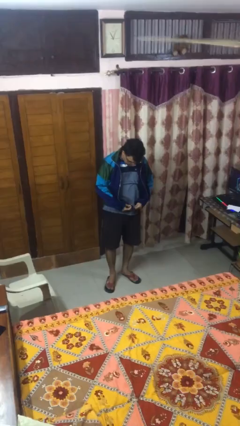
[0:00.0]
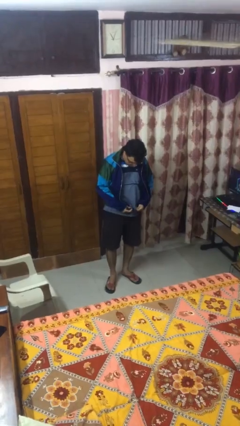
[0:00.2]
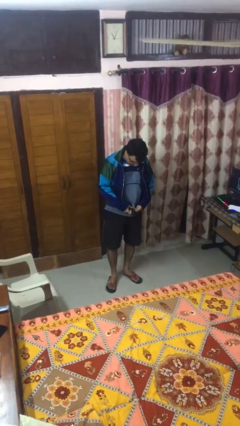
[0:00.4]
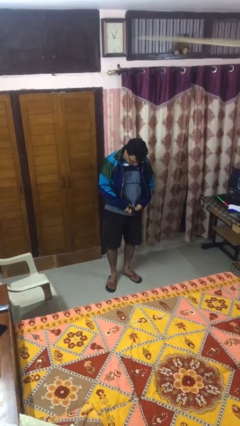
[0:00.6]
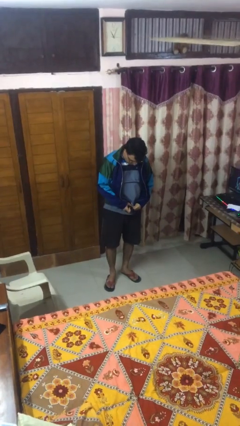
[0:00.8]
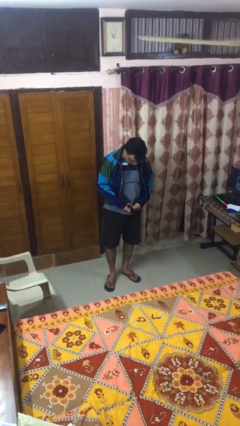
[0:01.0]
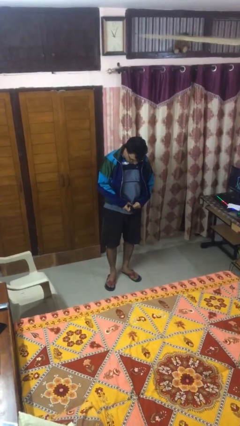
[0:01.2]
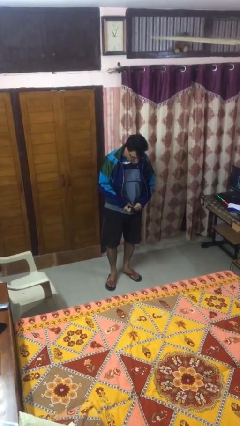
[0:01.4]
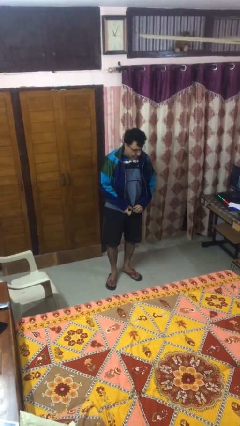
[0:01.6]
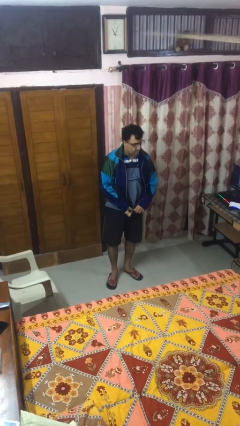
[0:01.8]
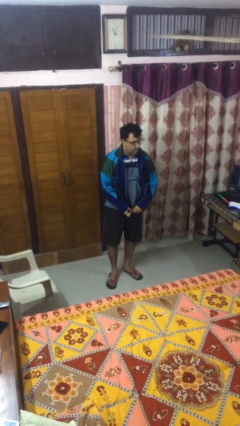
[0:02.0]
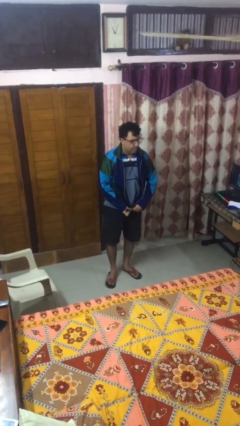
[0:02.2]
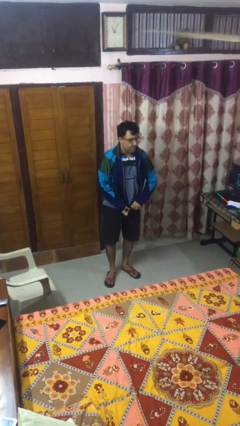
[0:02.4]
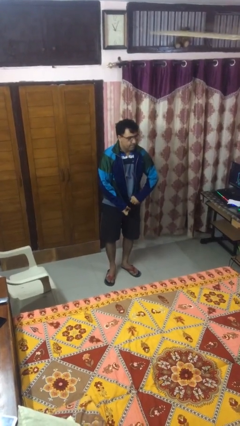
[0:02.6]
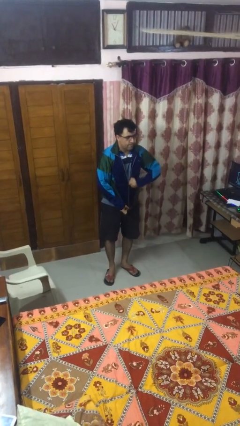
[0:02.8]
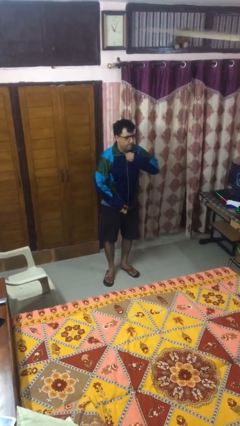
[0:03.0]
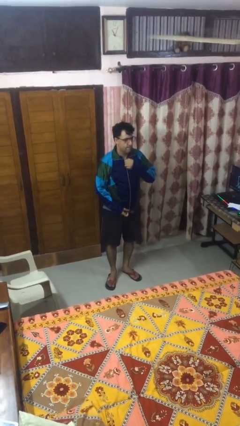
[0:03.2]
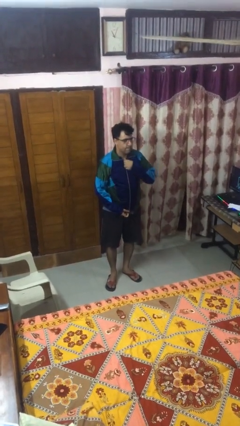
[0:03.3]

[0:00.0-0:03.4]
person zips up jacket

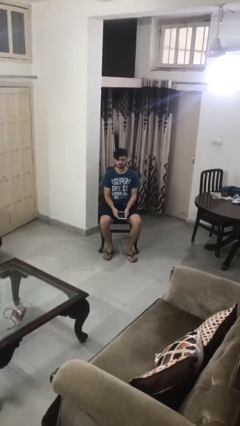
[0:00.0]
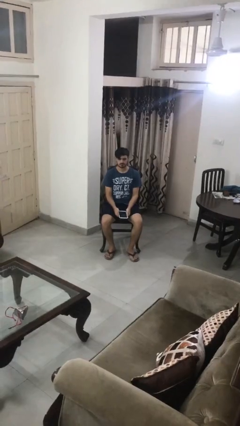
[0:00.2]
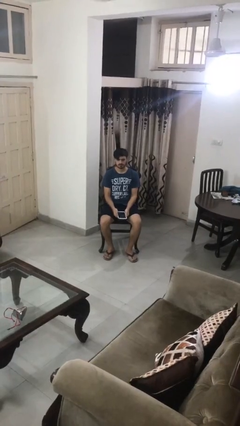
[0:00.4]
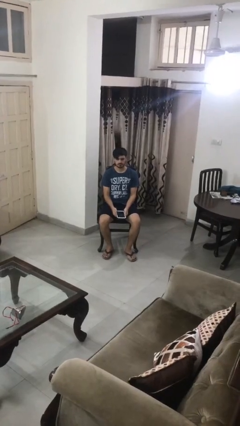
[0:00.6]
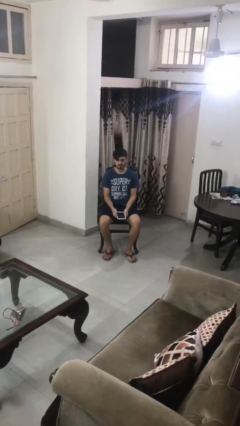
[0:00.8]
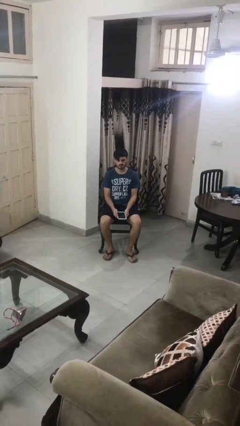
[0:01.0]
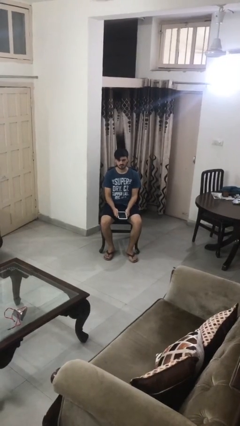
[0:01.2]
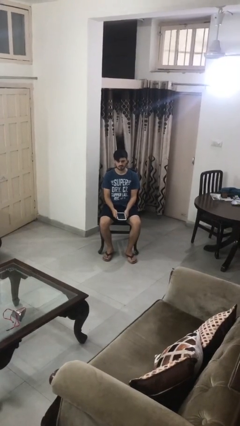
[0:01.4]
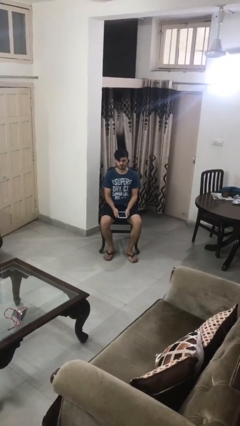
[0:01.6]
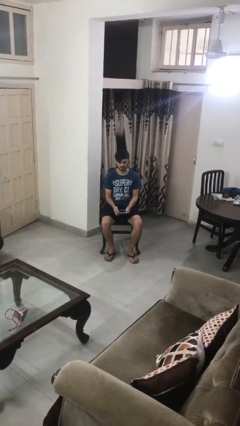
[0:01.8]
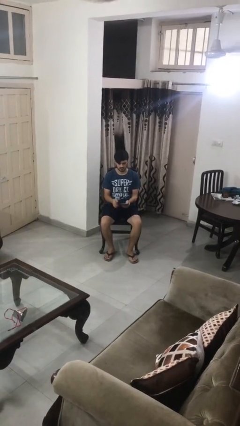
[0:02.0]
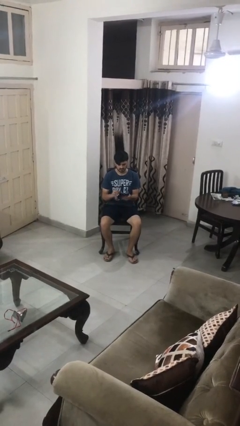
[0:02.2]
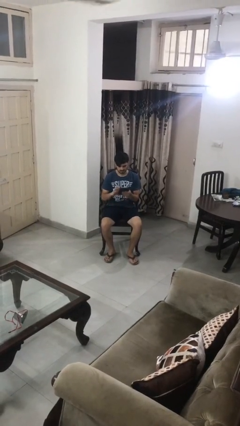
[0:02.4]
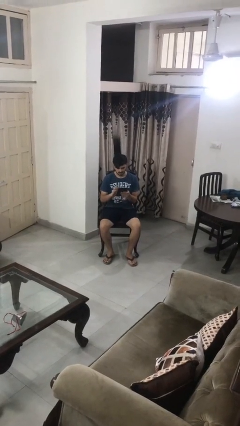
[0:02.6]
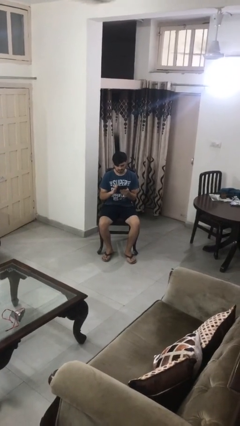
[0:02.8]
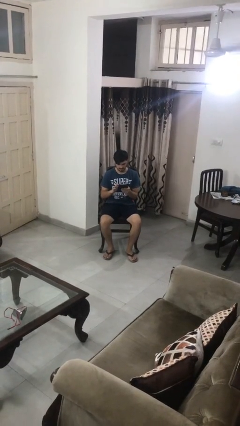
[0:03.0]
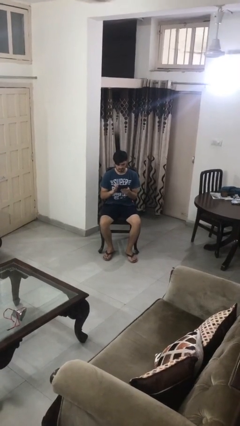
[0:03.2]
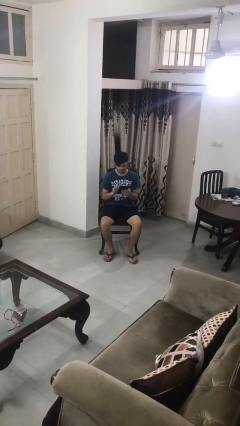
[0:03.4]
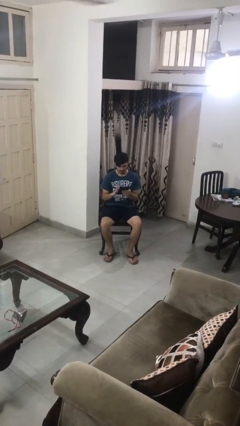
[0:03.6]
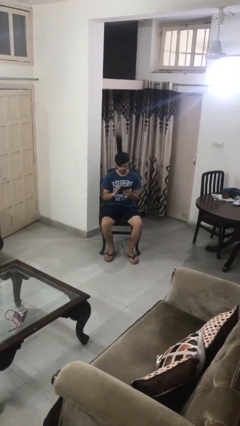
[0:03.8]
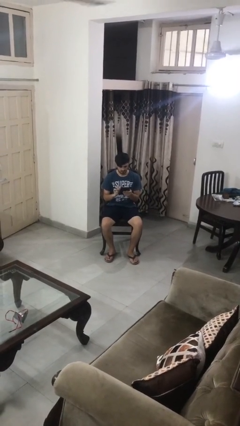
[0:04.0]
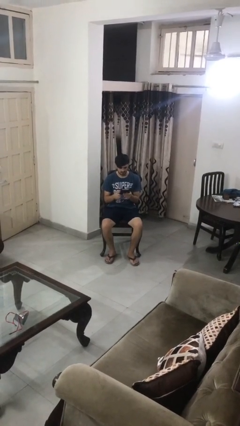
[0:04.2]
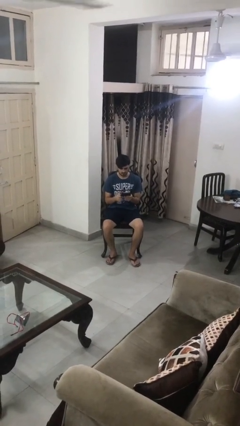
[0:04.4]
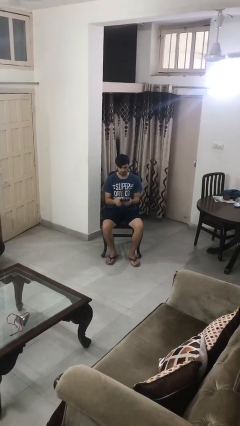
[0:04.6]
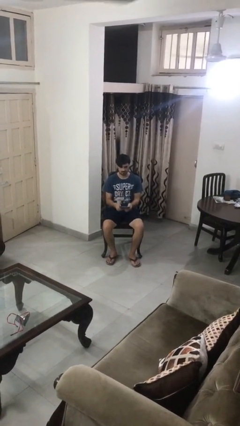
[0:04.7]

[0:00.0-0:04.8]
person interacts with tablet

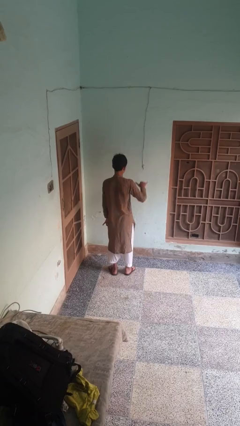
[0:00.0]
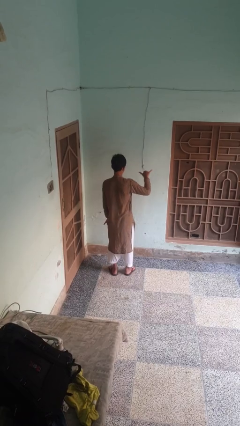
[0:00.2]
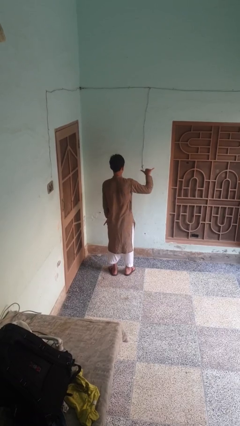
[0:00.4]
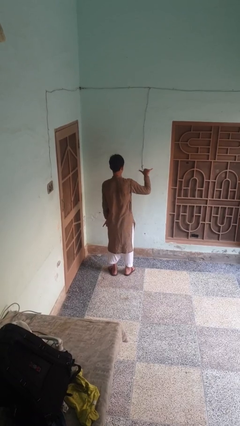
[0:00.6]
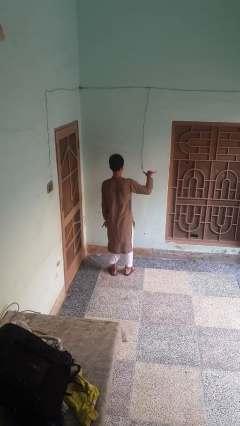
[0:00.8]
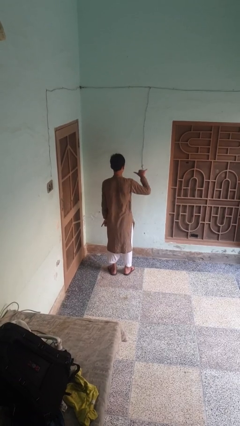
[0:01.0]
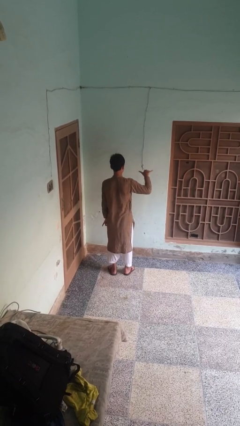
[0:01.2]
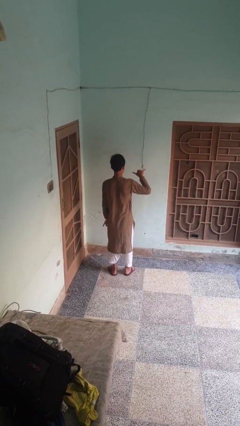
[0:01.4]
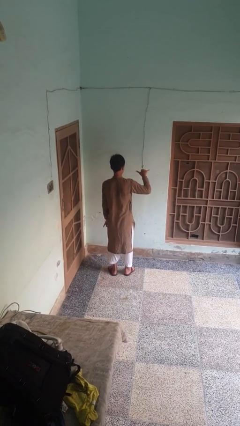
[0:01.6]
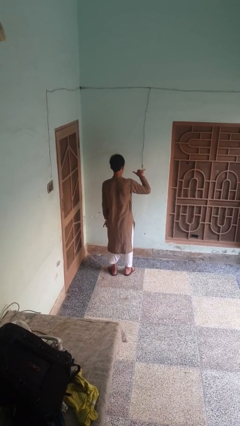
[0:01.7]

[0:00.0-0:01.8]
person gestures hang loose

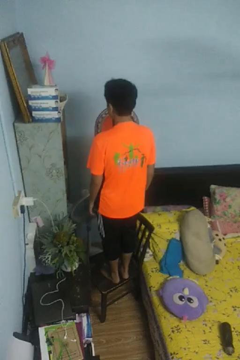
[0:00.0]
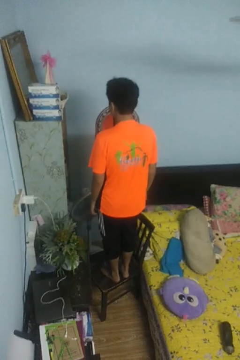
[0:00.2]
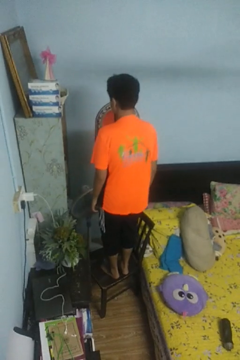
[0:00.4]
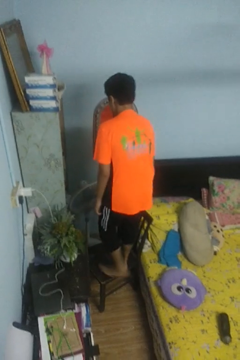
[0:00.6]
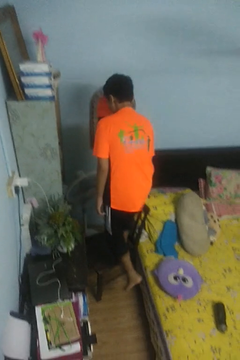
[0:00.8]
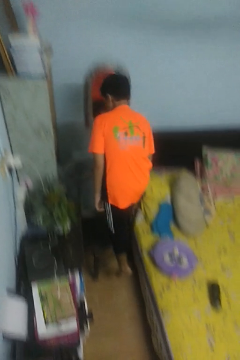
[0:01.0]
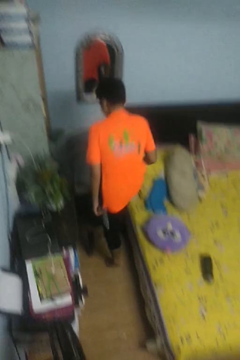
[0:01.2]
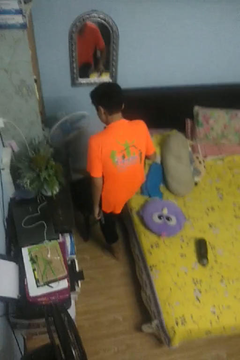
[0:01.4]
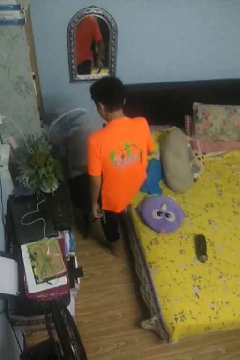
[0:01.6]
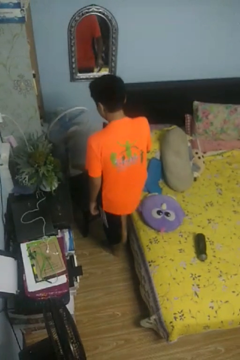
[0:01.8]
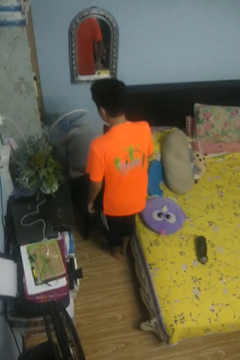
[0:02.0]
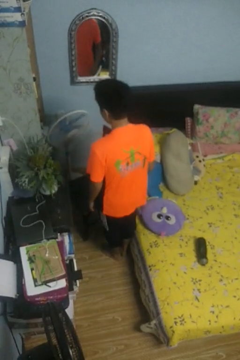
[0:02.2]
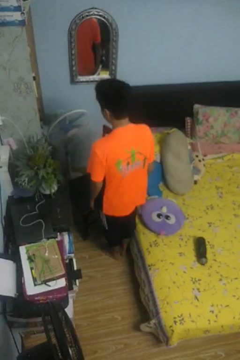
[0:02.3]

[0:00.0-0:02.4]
person climbs off chair

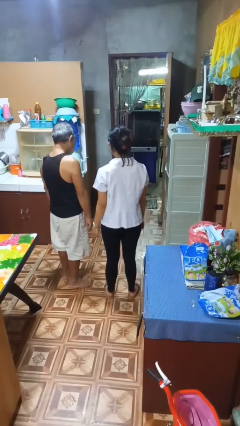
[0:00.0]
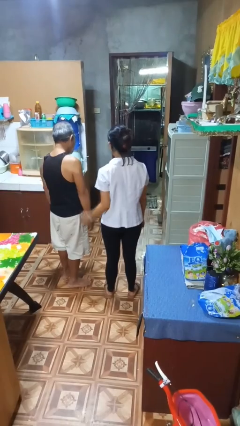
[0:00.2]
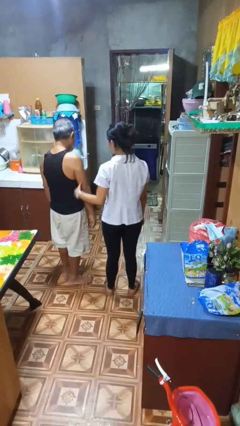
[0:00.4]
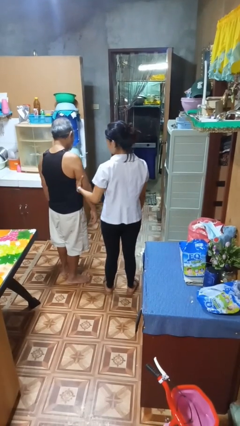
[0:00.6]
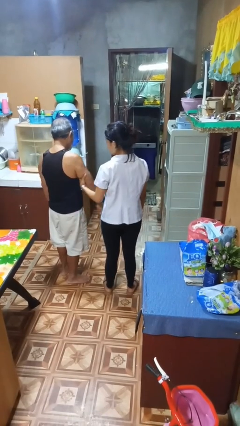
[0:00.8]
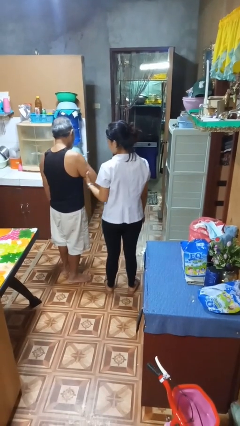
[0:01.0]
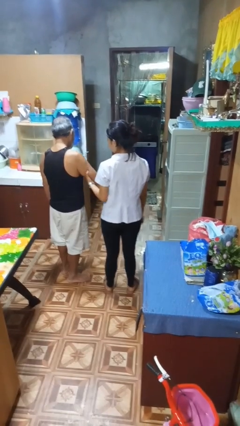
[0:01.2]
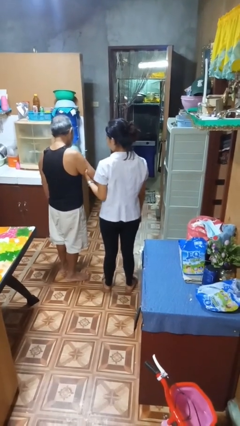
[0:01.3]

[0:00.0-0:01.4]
person grabs person by bicep

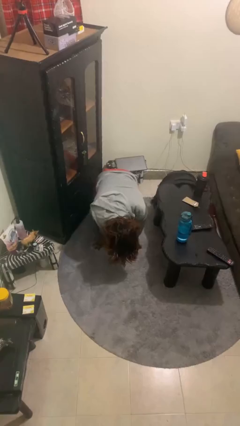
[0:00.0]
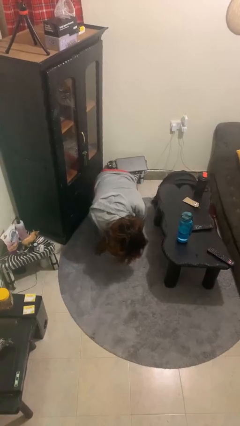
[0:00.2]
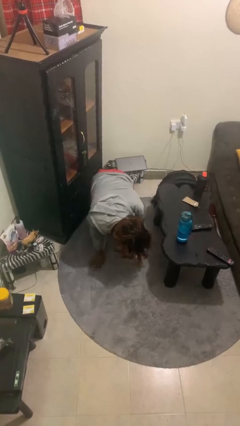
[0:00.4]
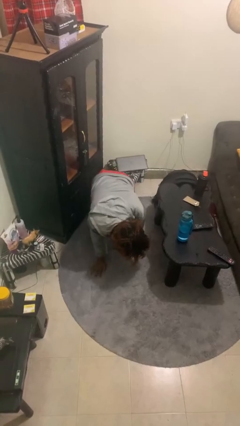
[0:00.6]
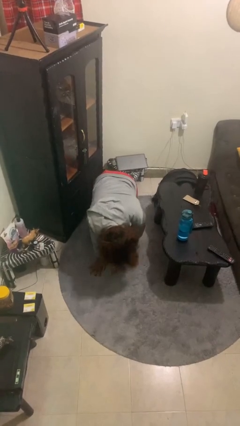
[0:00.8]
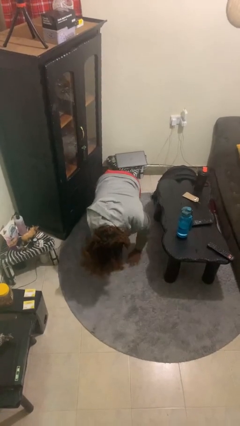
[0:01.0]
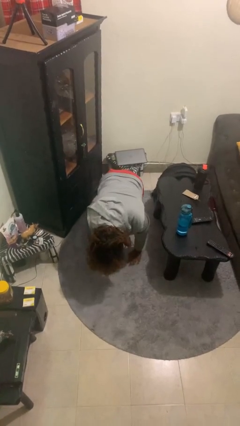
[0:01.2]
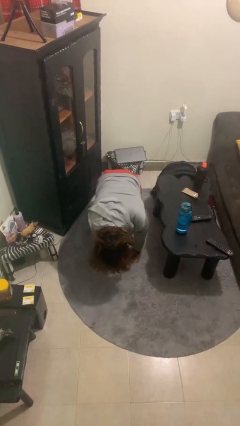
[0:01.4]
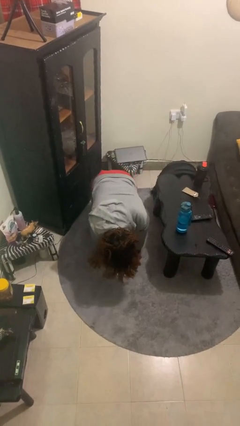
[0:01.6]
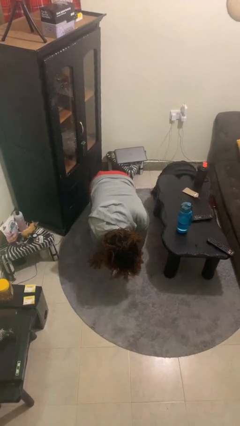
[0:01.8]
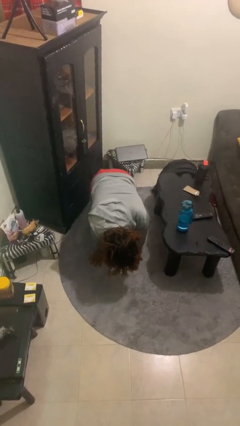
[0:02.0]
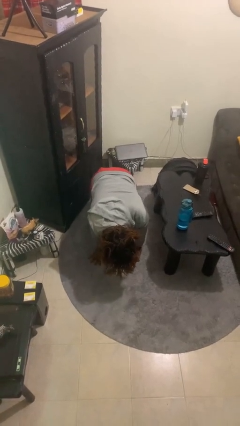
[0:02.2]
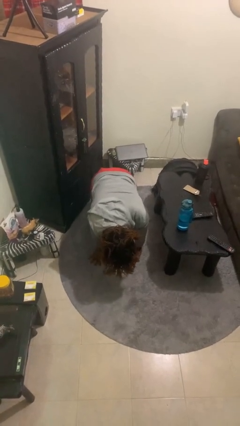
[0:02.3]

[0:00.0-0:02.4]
person crawls

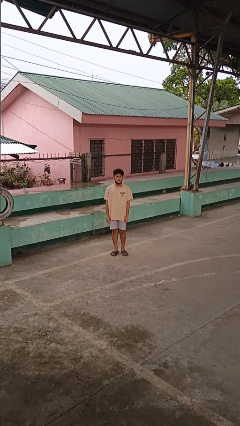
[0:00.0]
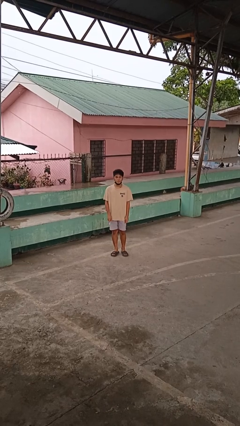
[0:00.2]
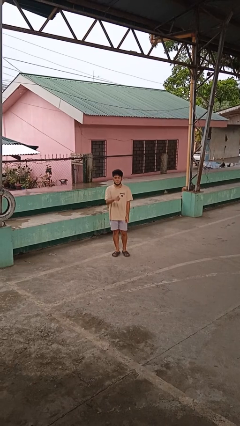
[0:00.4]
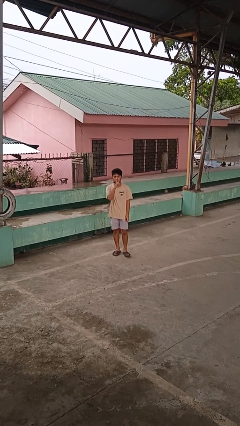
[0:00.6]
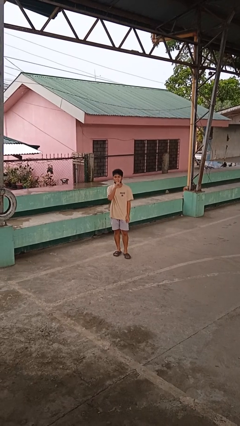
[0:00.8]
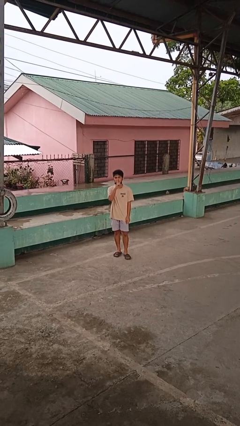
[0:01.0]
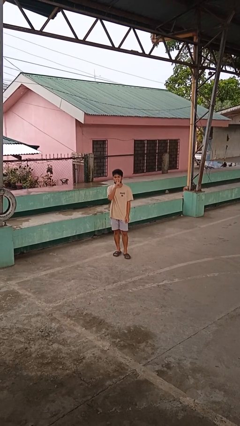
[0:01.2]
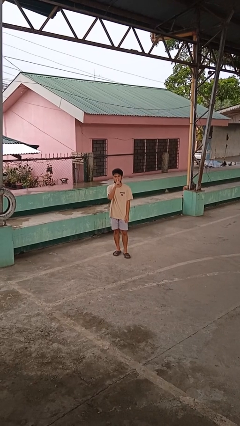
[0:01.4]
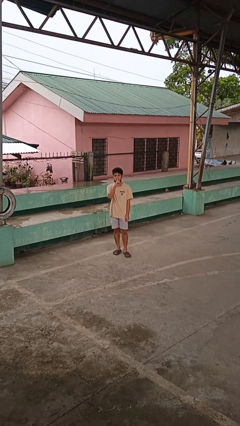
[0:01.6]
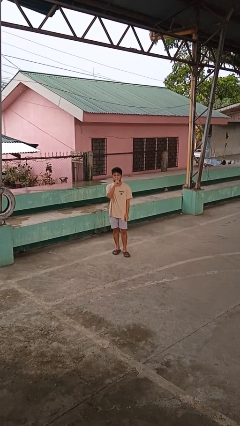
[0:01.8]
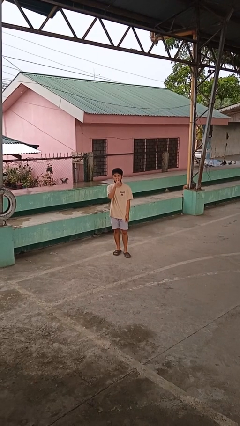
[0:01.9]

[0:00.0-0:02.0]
person gestures be quiet
